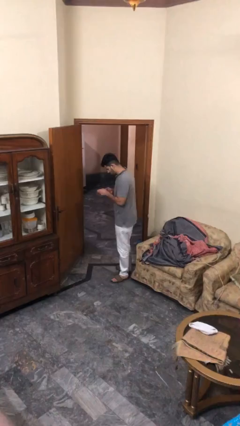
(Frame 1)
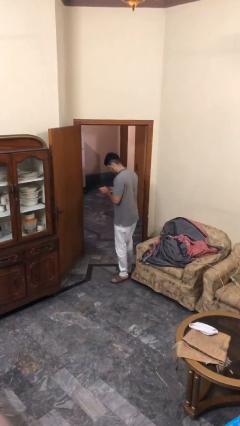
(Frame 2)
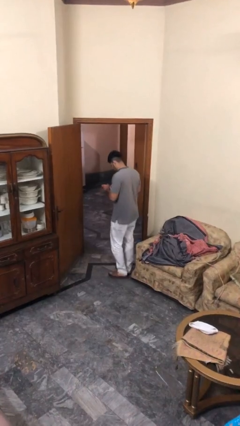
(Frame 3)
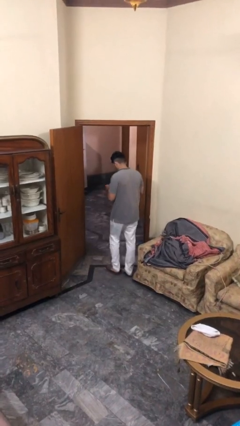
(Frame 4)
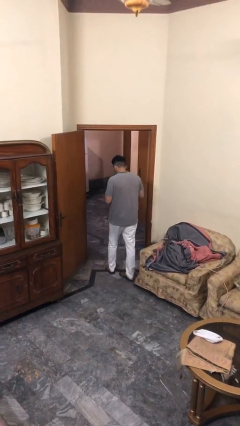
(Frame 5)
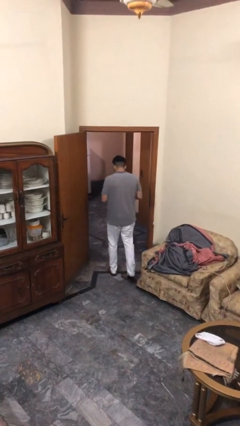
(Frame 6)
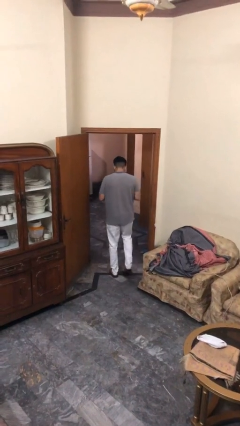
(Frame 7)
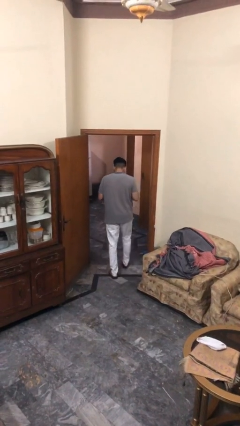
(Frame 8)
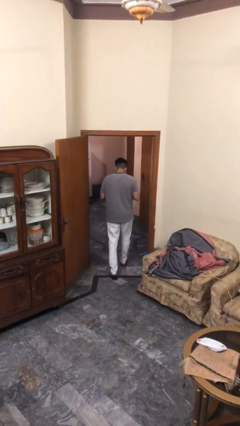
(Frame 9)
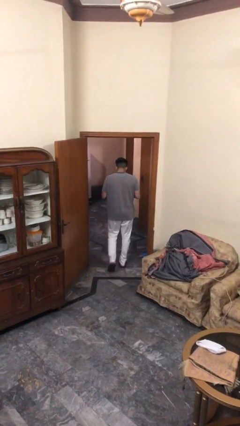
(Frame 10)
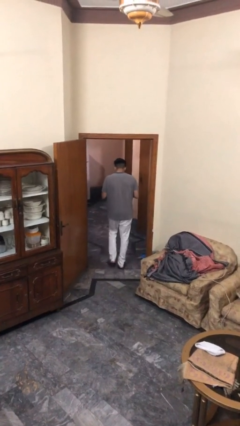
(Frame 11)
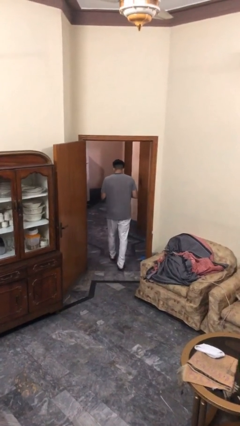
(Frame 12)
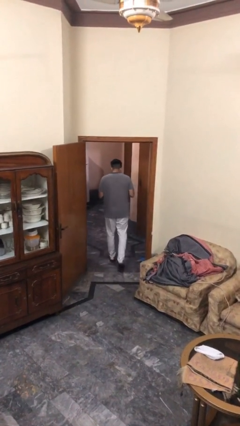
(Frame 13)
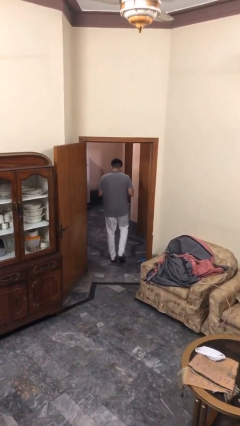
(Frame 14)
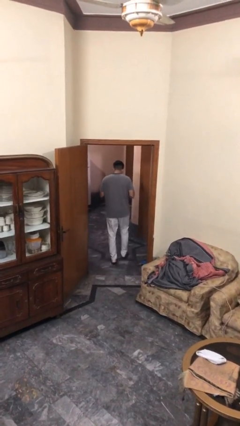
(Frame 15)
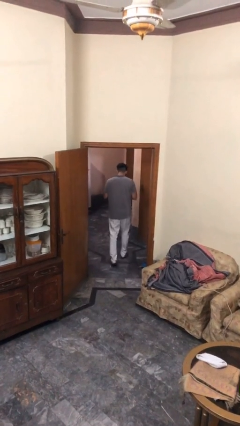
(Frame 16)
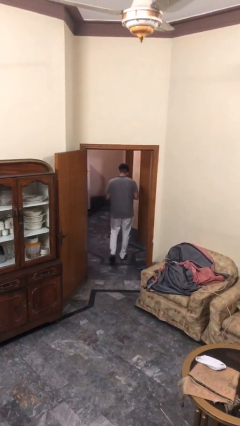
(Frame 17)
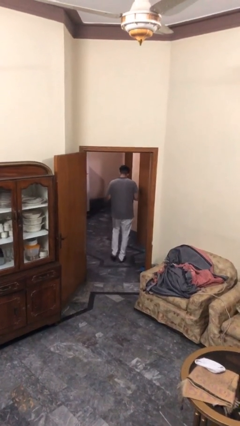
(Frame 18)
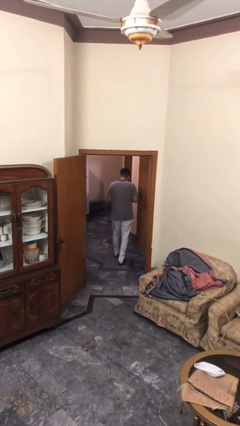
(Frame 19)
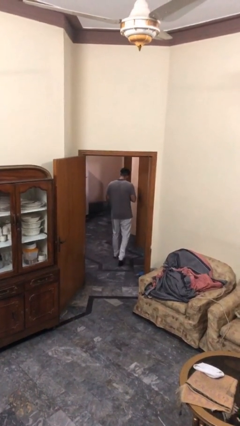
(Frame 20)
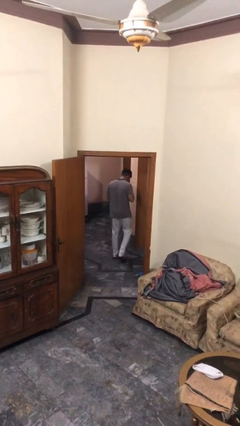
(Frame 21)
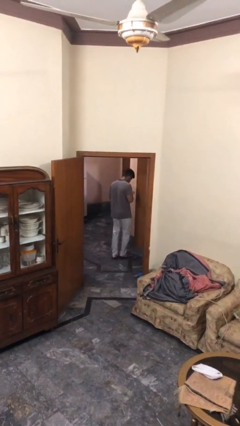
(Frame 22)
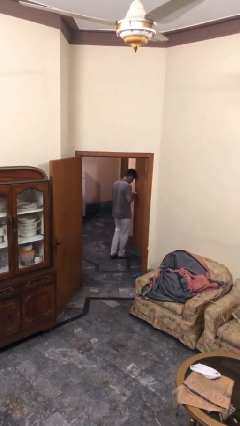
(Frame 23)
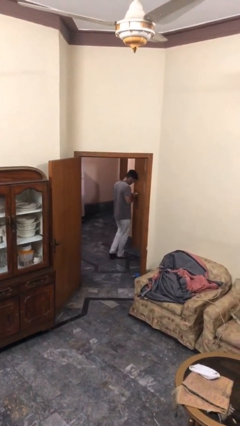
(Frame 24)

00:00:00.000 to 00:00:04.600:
person exits scene through structure

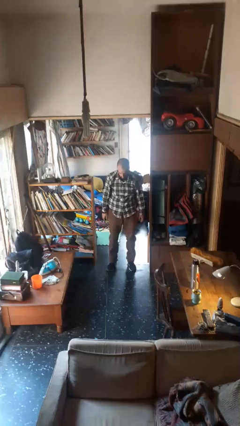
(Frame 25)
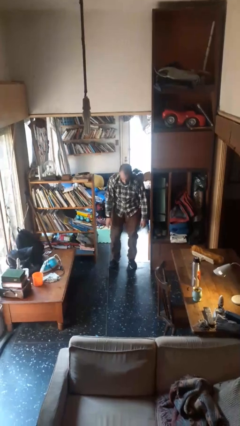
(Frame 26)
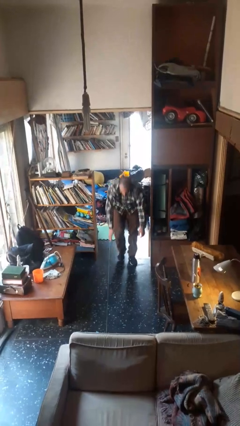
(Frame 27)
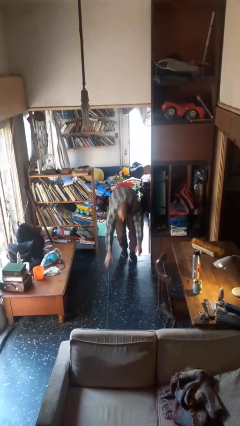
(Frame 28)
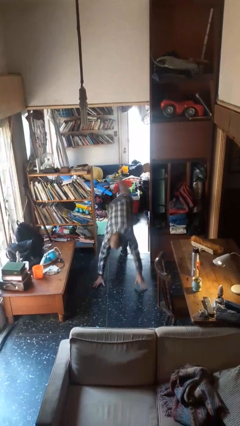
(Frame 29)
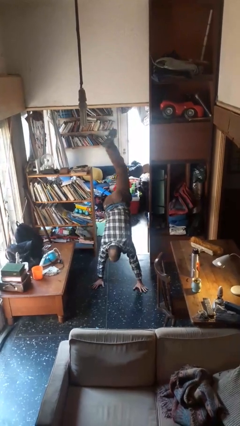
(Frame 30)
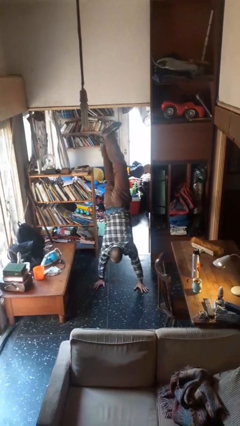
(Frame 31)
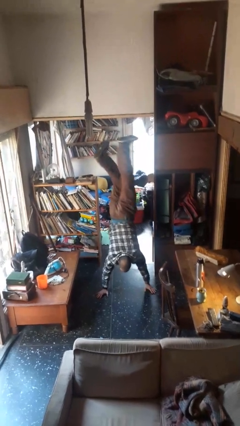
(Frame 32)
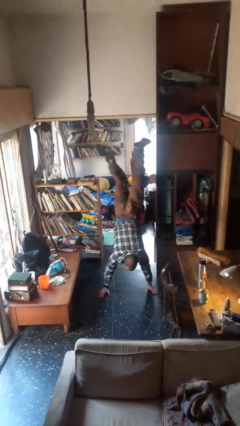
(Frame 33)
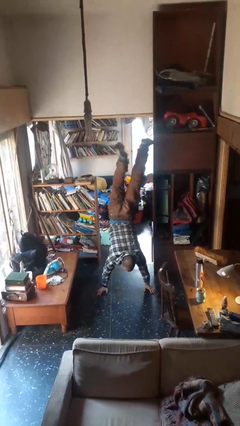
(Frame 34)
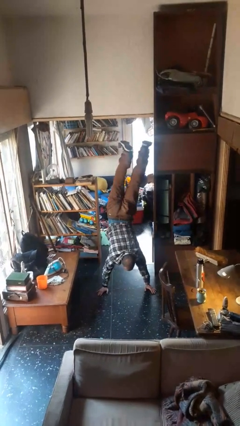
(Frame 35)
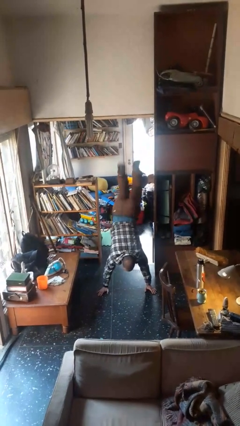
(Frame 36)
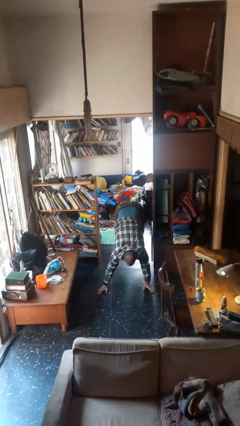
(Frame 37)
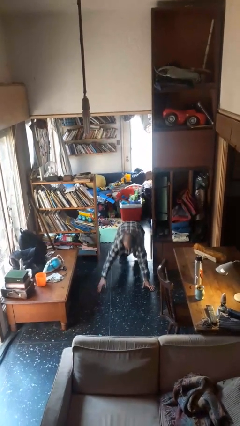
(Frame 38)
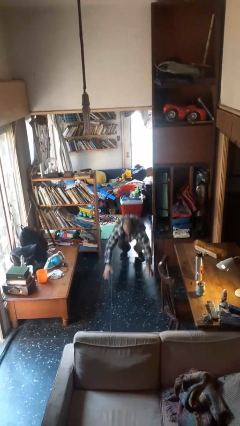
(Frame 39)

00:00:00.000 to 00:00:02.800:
person handstand

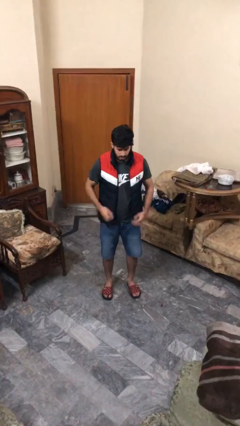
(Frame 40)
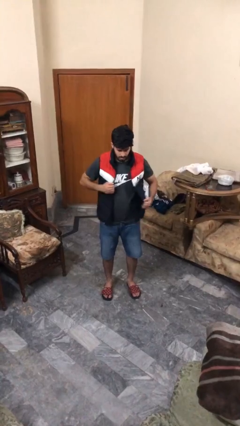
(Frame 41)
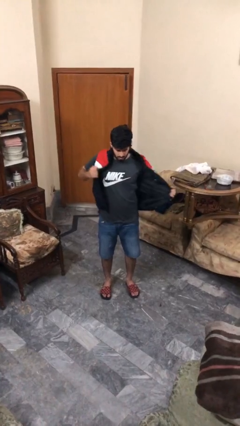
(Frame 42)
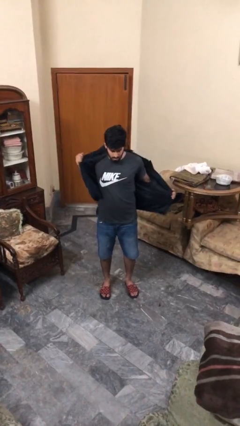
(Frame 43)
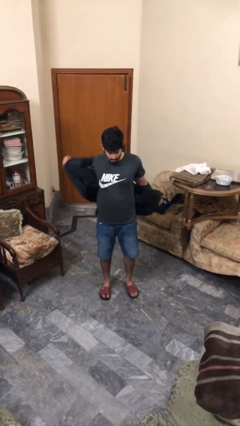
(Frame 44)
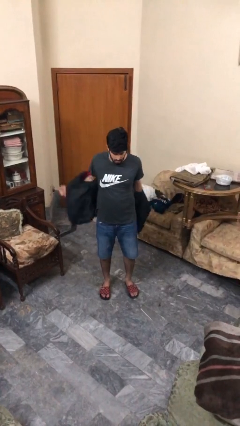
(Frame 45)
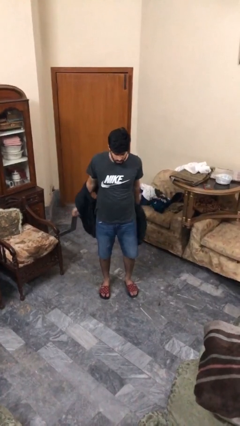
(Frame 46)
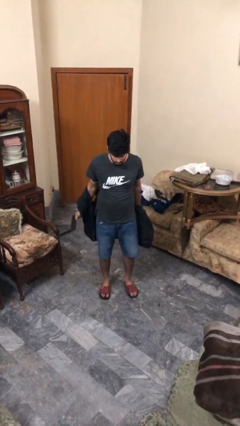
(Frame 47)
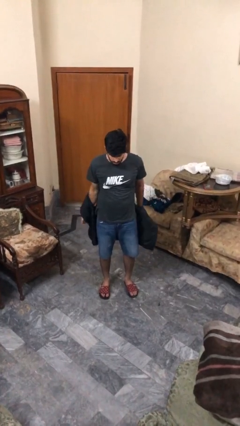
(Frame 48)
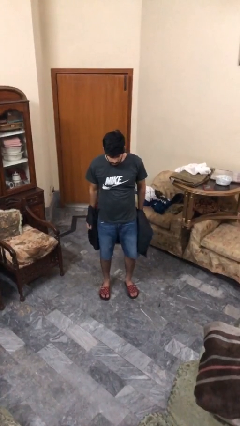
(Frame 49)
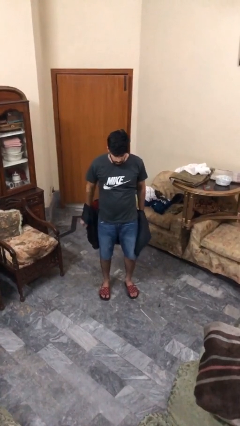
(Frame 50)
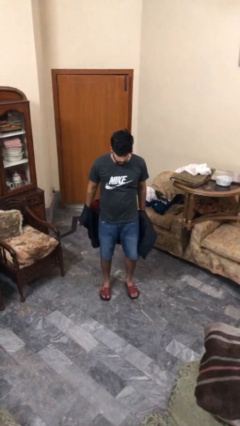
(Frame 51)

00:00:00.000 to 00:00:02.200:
person takes off jacket

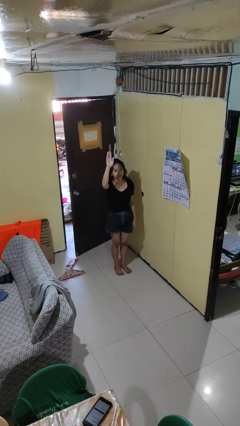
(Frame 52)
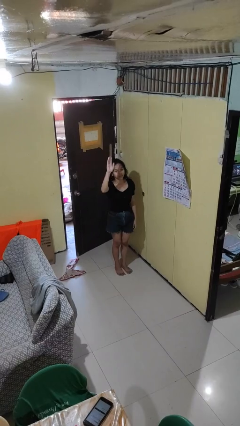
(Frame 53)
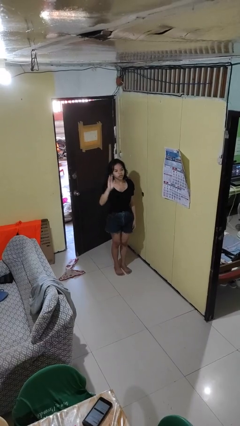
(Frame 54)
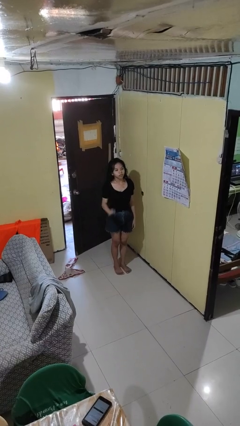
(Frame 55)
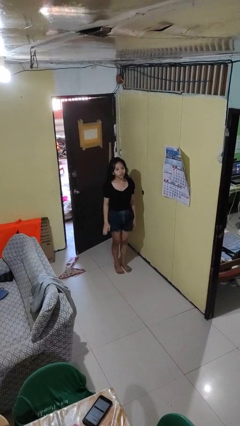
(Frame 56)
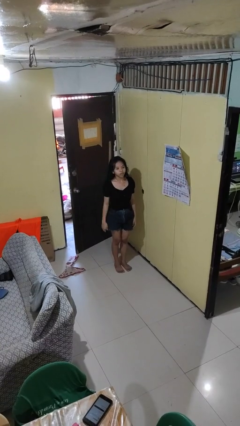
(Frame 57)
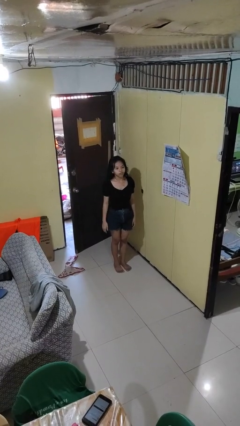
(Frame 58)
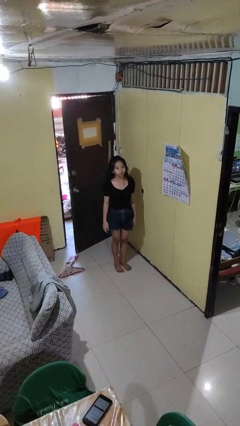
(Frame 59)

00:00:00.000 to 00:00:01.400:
person gestures lower hand

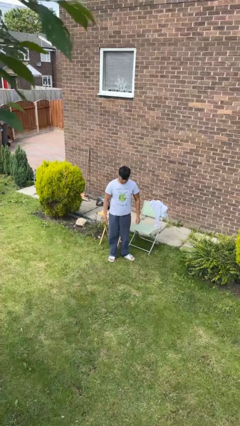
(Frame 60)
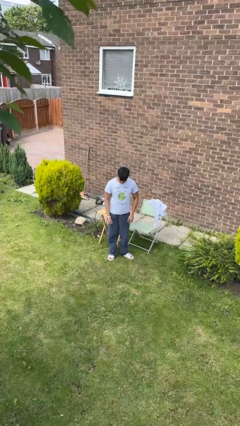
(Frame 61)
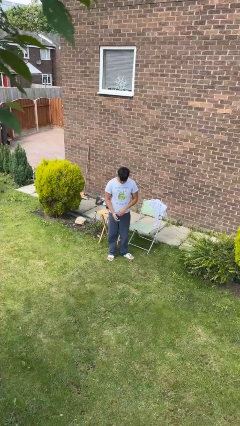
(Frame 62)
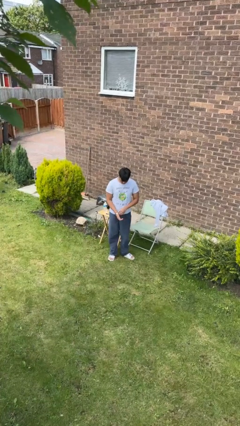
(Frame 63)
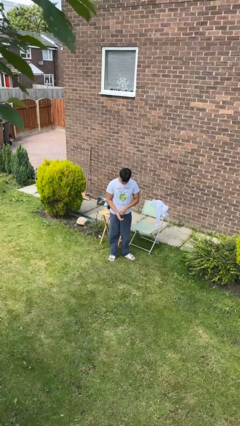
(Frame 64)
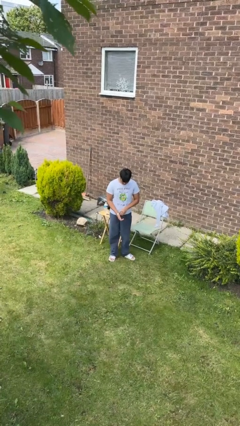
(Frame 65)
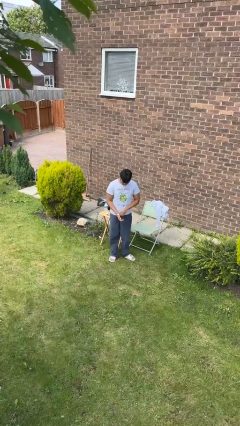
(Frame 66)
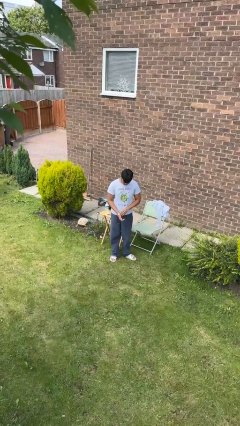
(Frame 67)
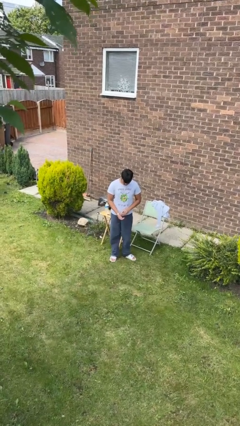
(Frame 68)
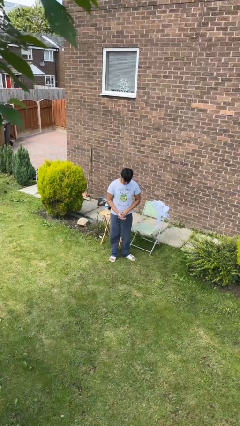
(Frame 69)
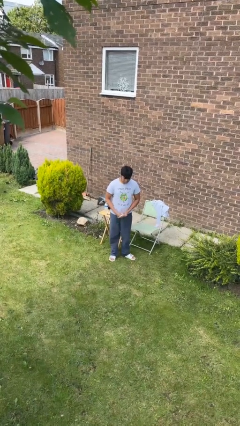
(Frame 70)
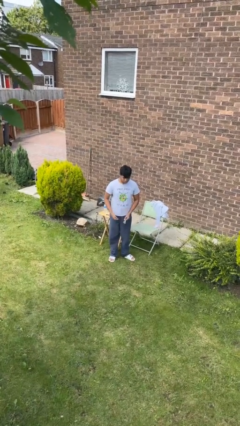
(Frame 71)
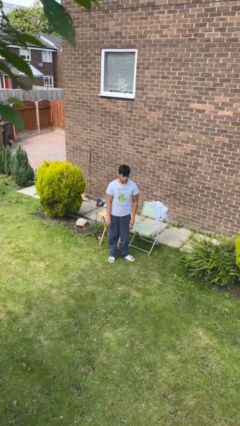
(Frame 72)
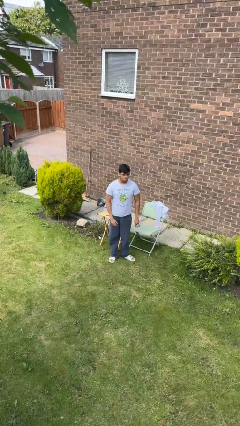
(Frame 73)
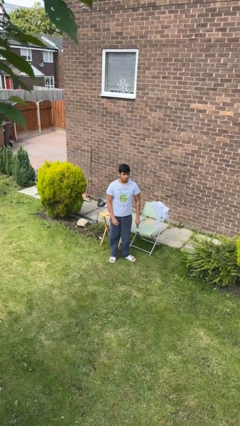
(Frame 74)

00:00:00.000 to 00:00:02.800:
person takes off wristwatch

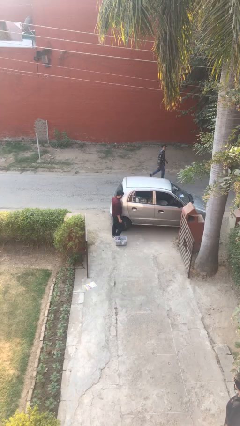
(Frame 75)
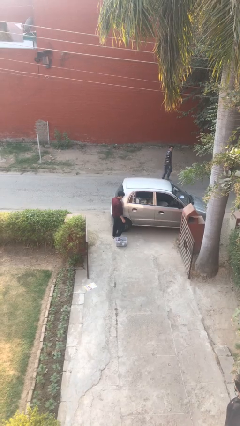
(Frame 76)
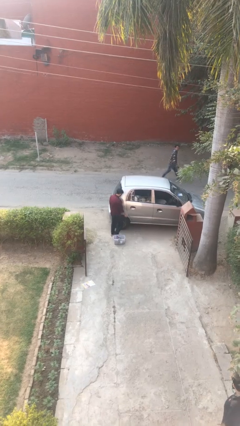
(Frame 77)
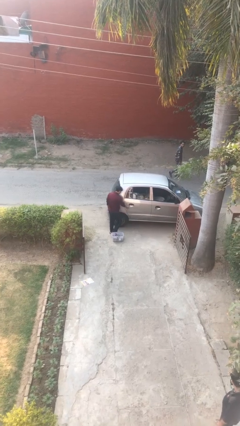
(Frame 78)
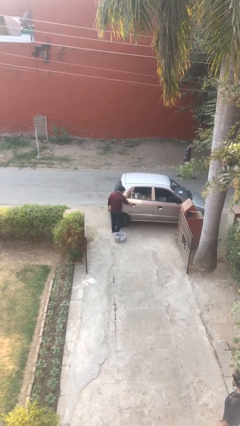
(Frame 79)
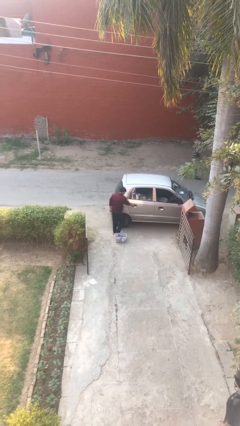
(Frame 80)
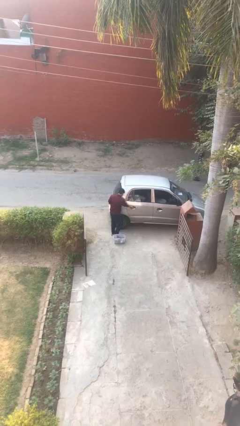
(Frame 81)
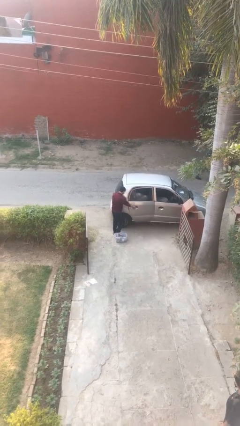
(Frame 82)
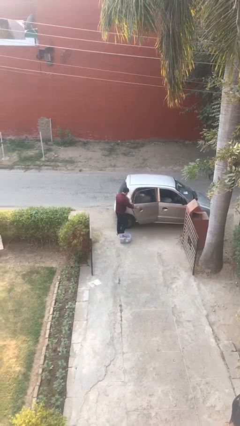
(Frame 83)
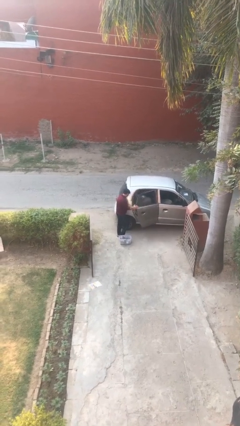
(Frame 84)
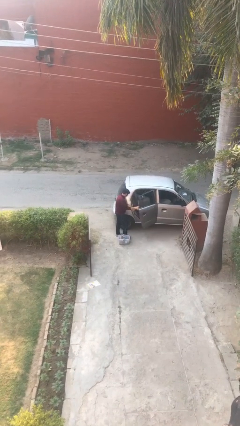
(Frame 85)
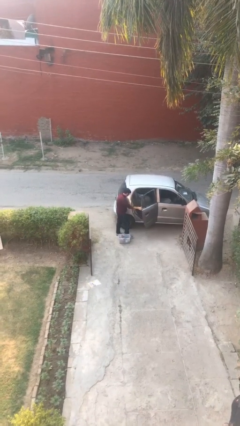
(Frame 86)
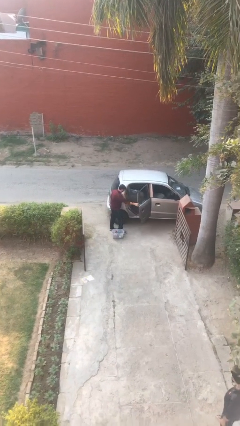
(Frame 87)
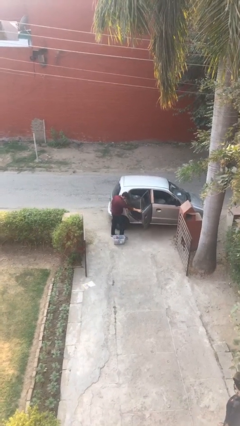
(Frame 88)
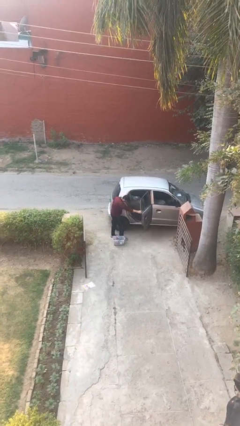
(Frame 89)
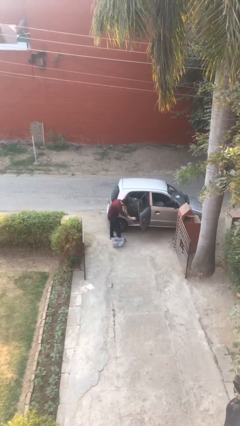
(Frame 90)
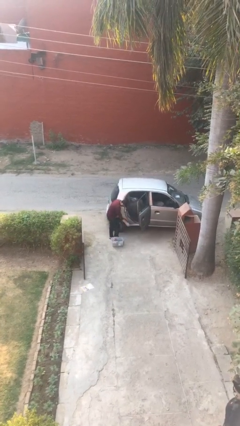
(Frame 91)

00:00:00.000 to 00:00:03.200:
person opens car door

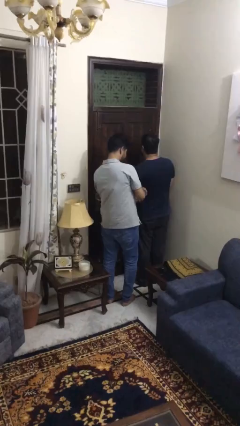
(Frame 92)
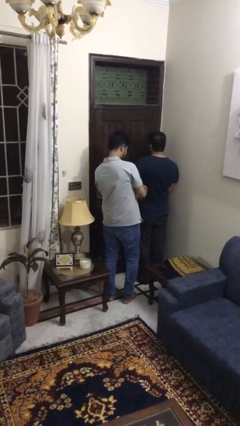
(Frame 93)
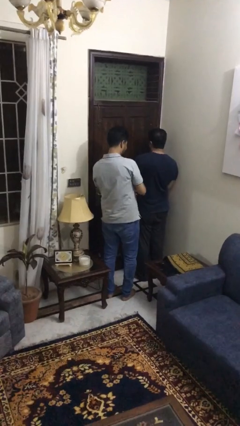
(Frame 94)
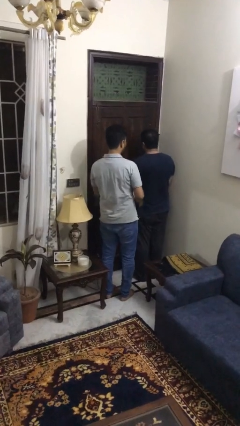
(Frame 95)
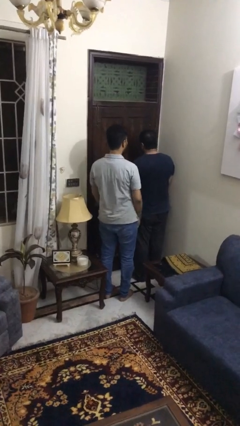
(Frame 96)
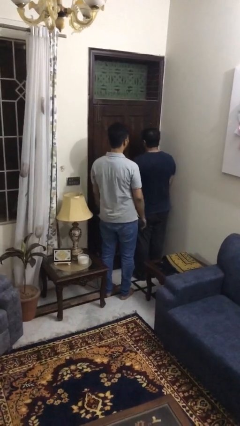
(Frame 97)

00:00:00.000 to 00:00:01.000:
person tickles person
